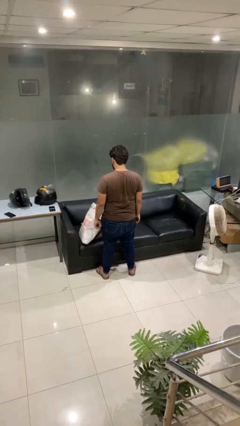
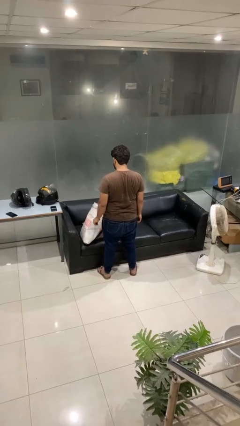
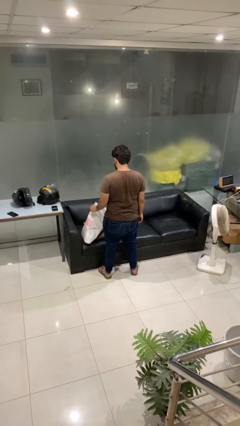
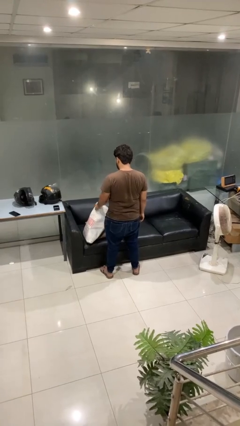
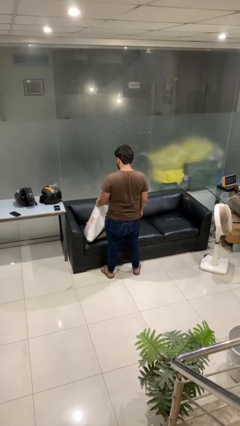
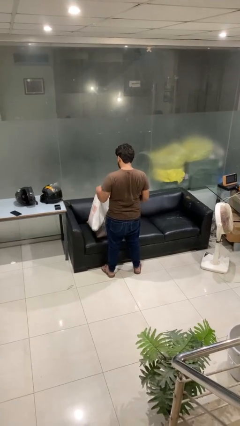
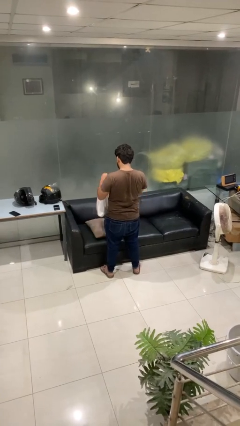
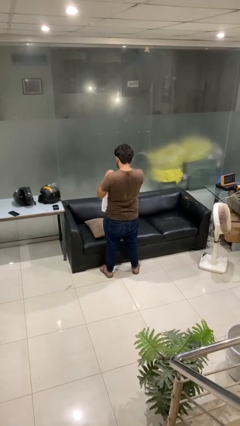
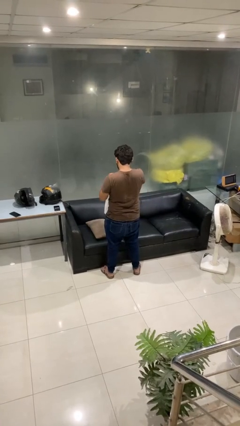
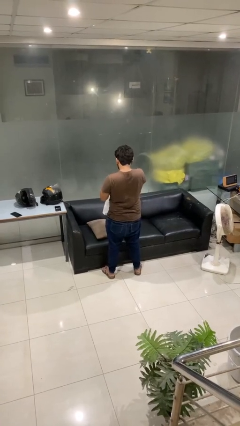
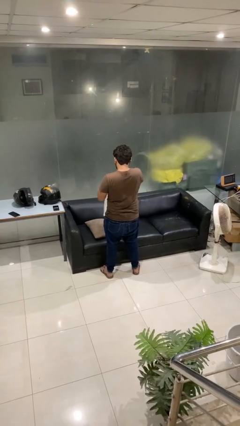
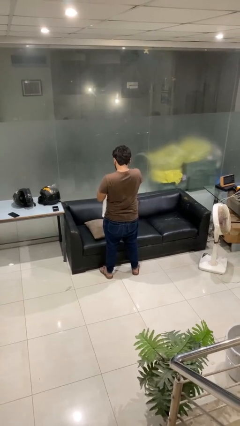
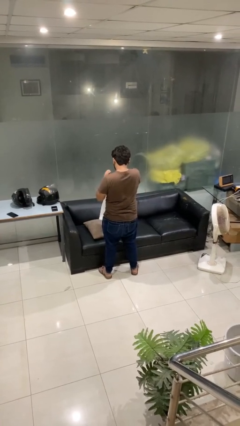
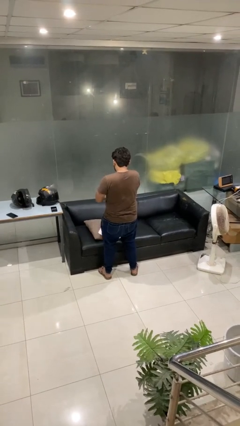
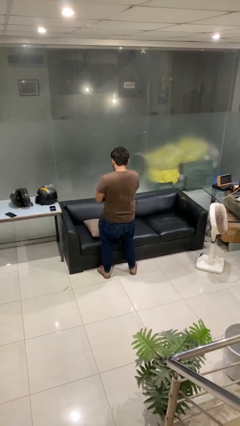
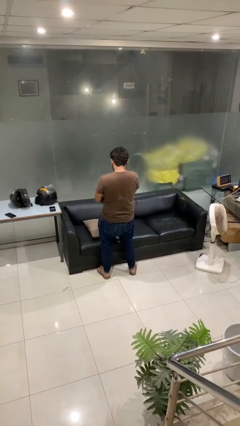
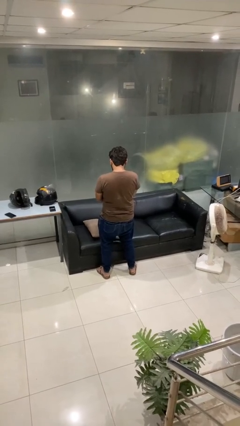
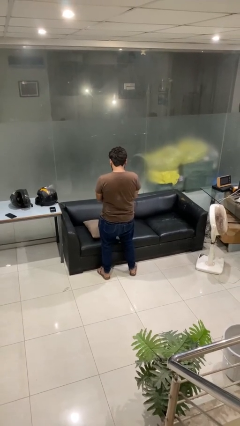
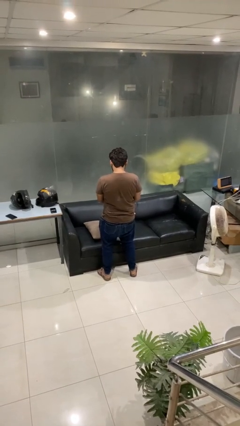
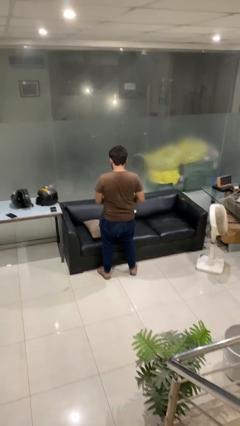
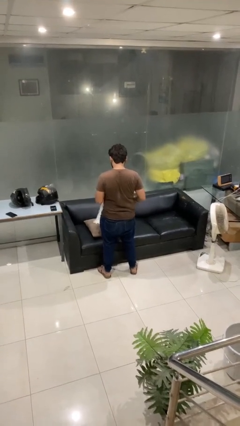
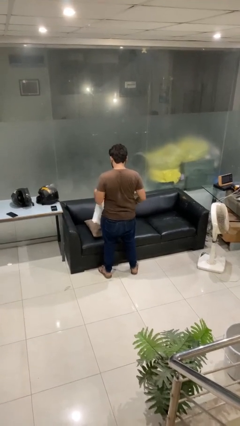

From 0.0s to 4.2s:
person searches in bag

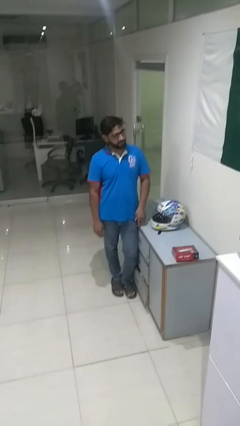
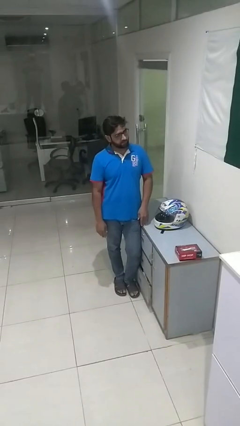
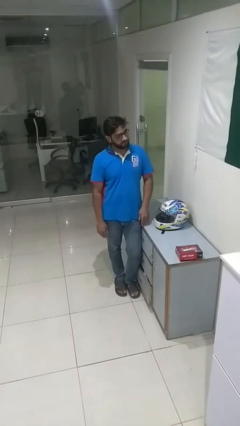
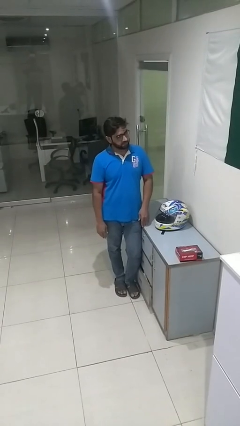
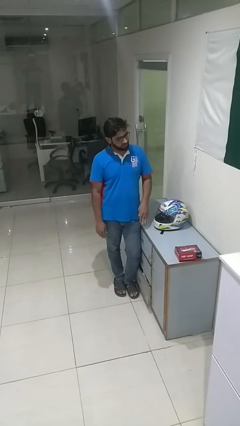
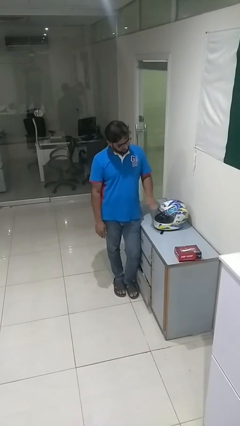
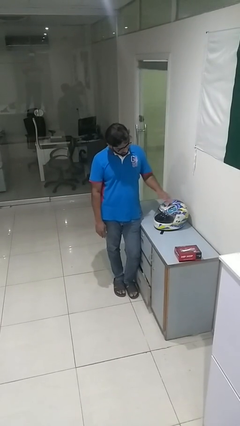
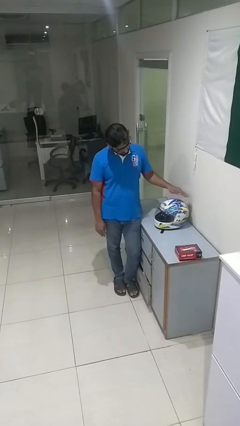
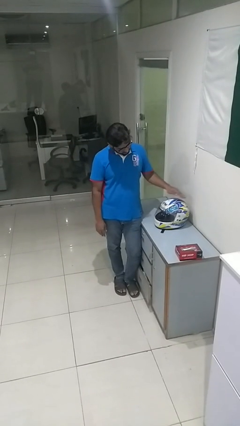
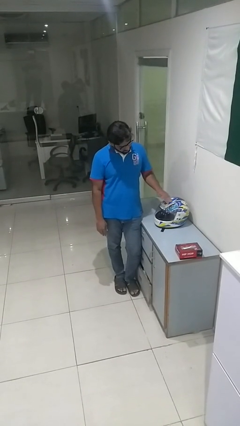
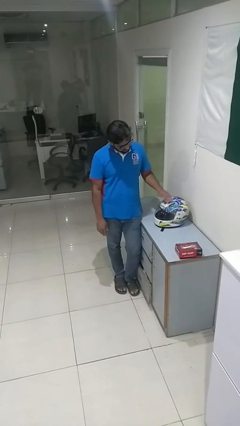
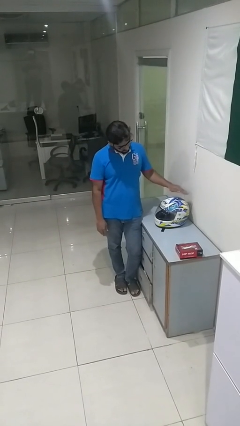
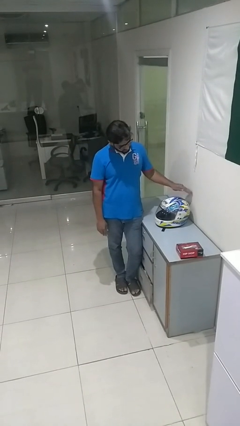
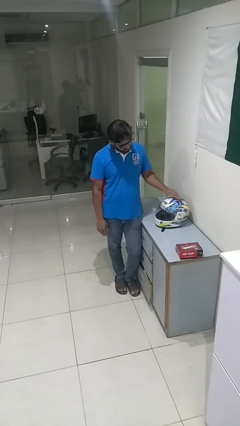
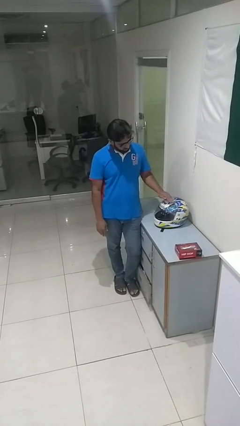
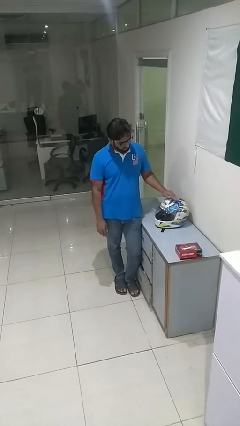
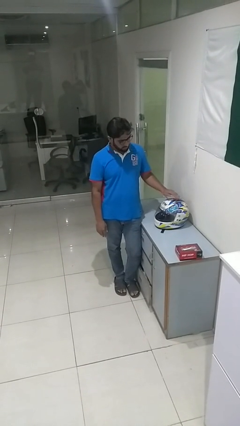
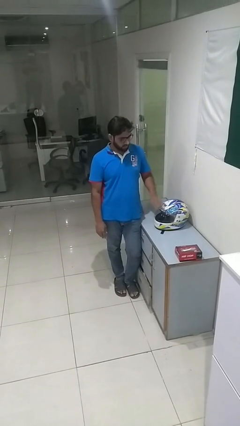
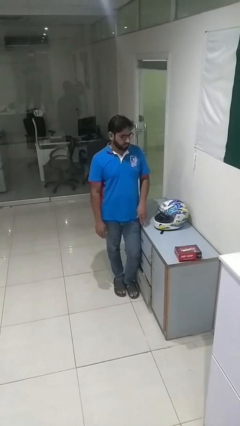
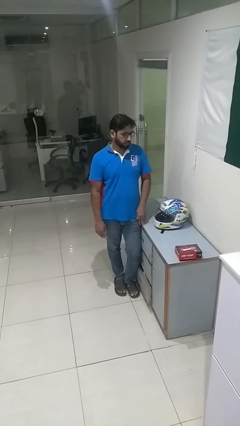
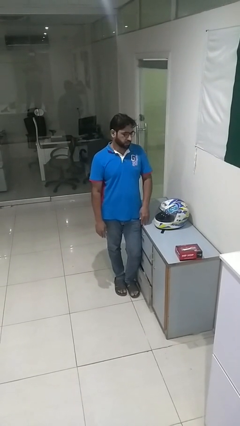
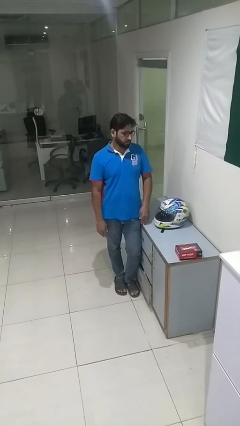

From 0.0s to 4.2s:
person waves hand over object

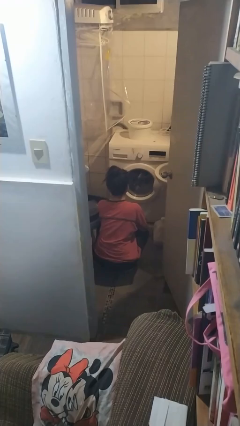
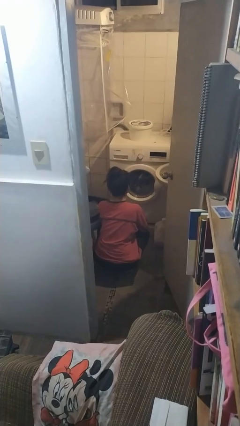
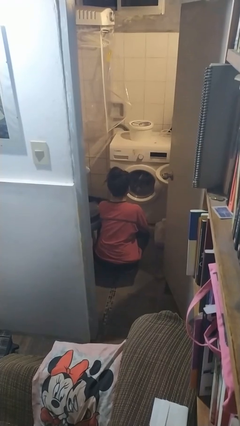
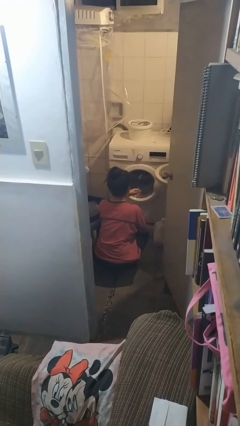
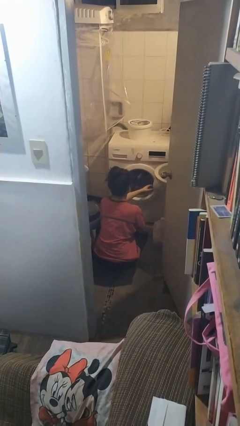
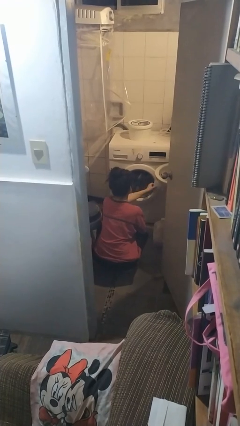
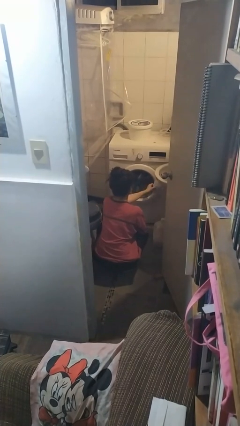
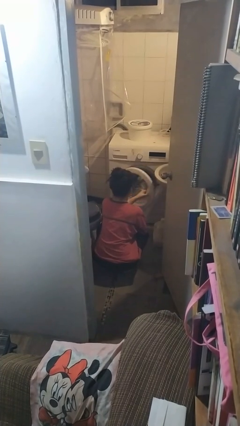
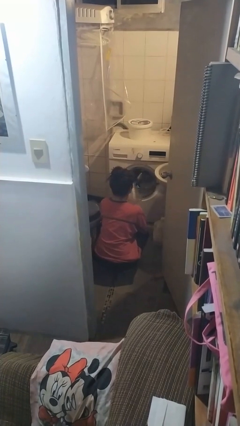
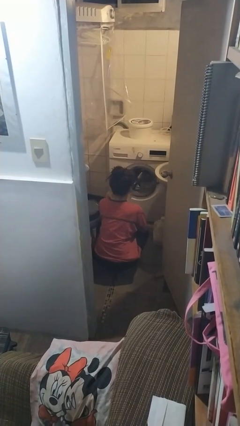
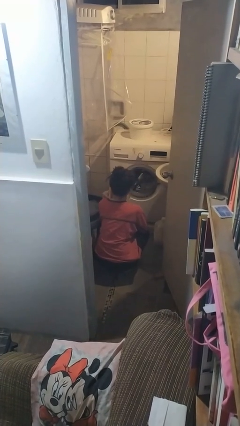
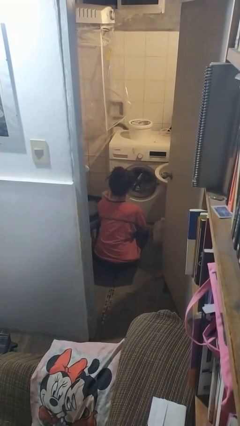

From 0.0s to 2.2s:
person opens clothes washer

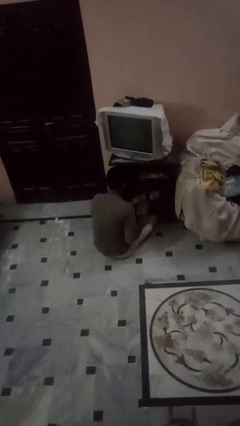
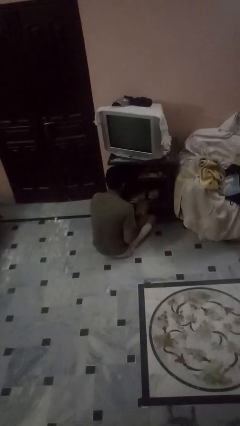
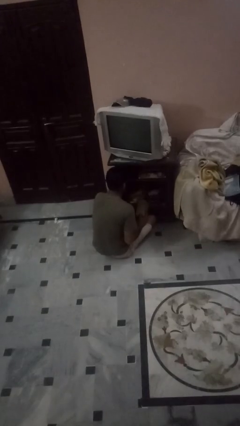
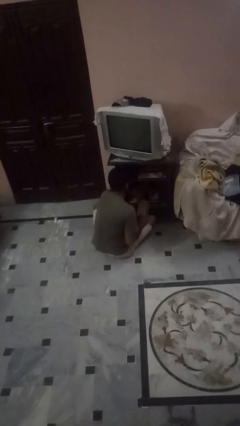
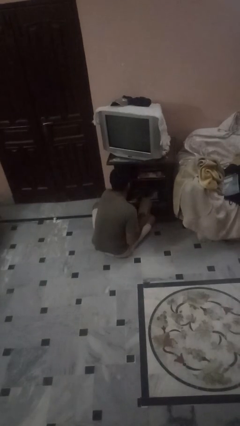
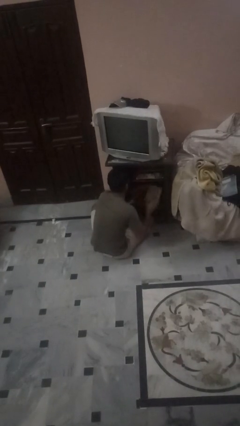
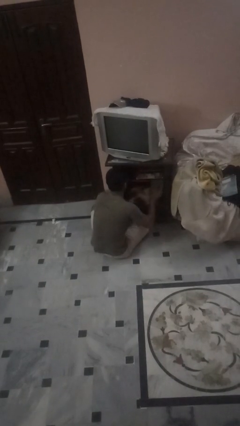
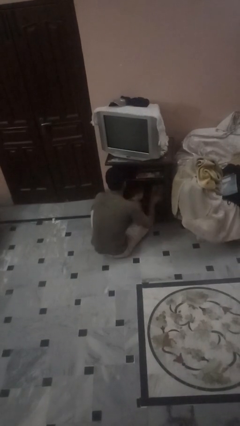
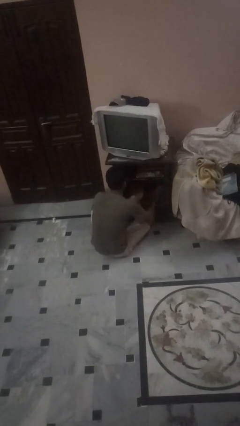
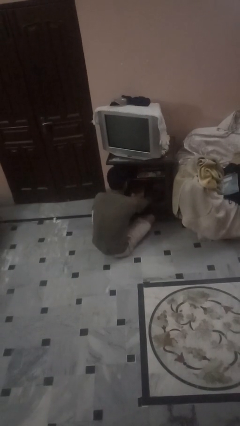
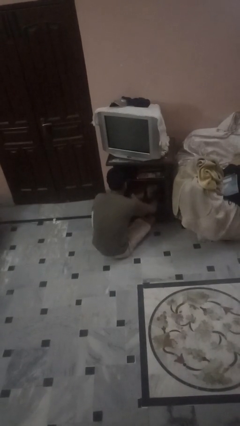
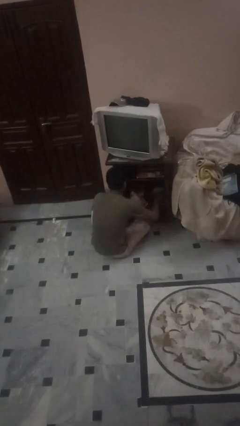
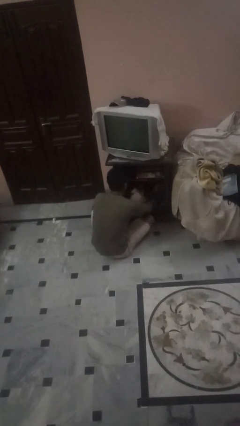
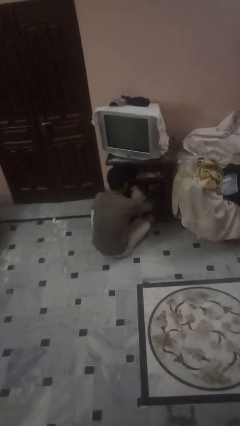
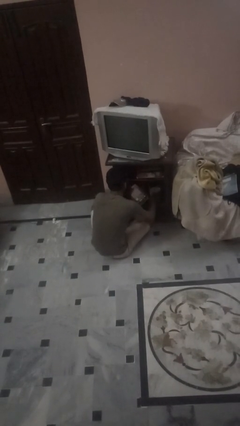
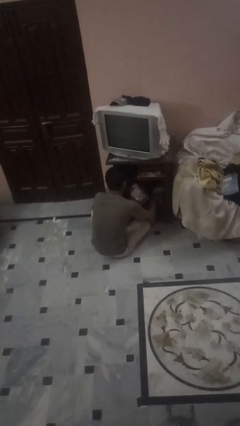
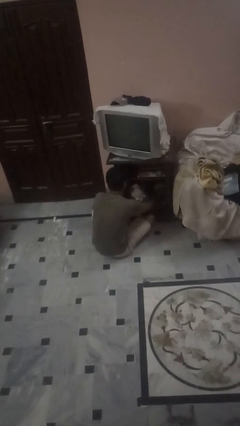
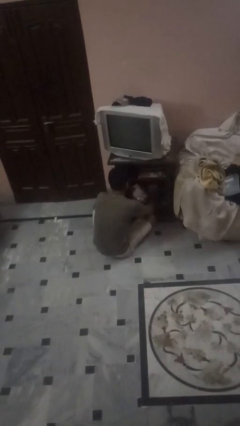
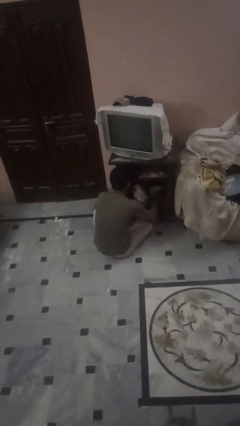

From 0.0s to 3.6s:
person dusts furniture

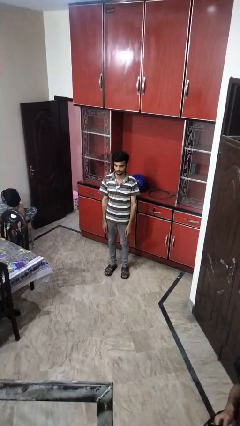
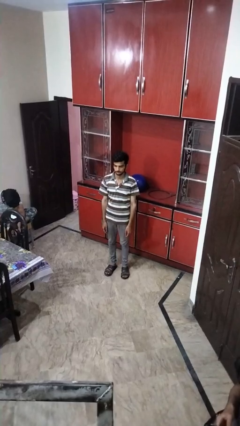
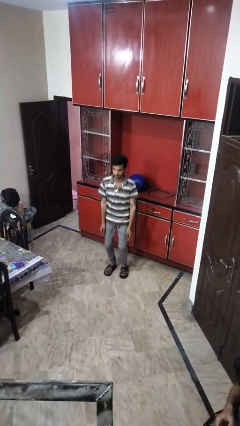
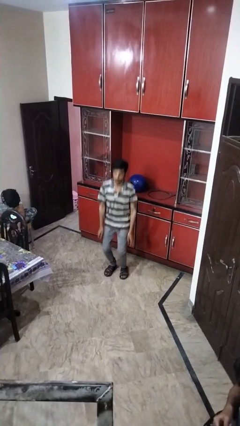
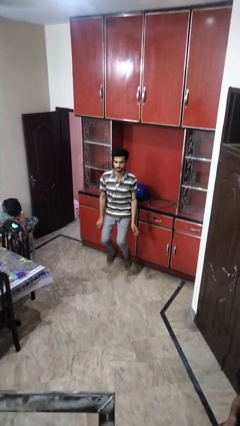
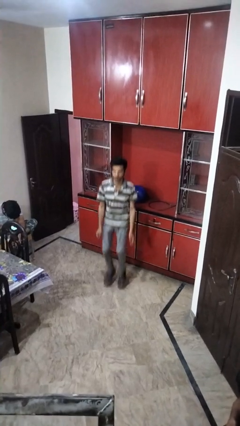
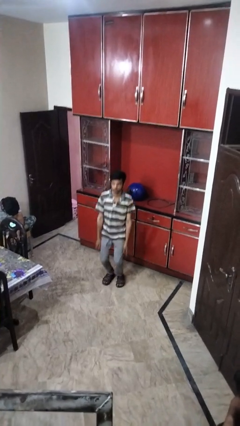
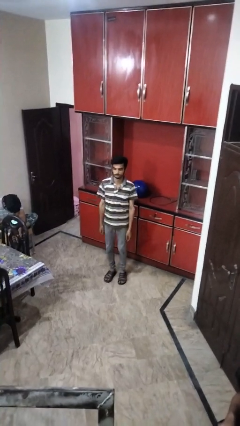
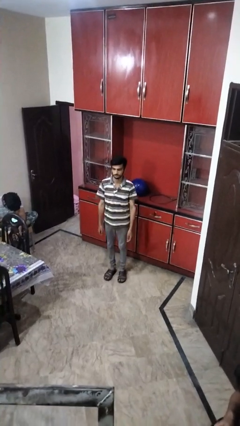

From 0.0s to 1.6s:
person jumps

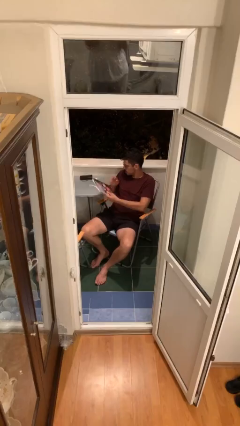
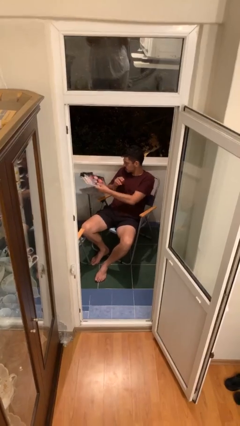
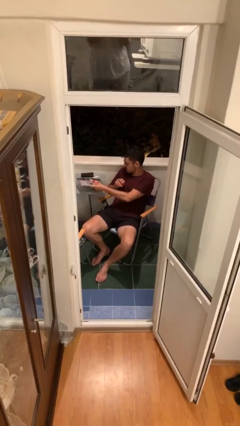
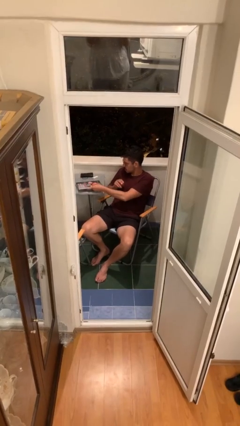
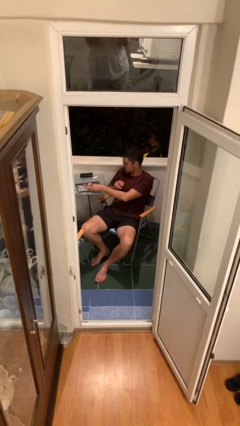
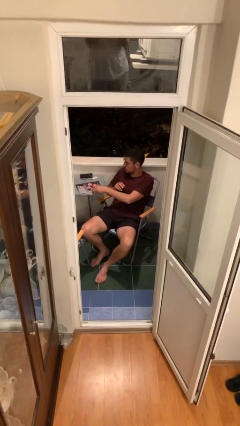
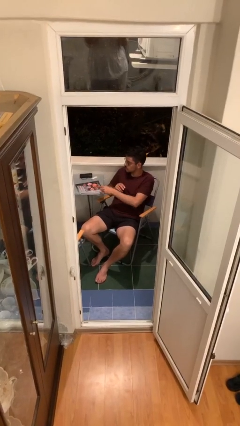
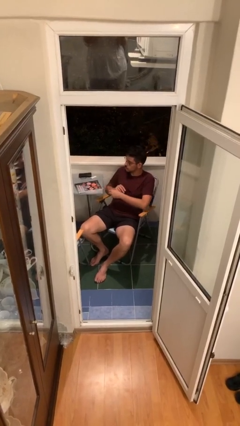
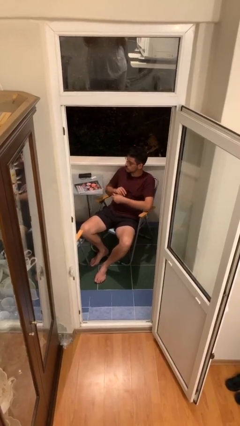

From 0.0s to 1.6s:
person puts down object on table

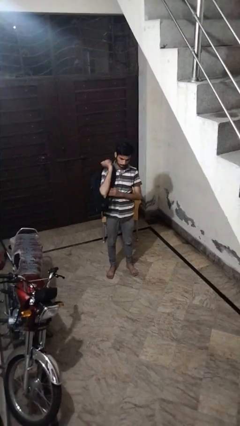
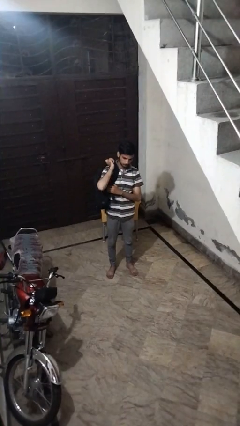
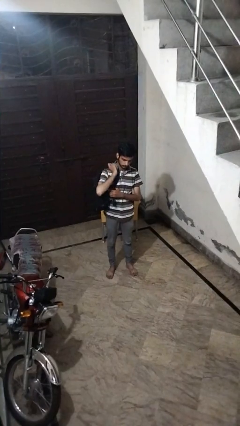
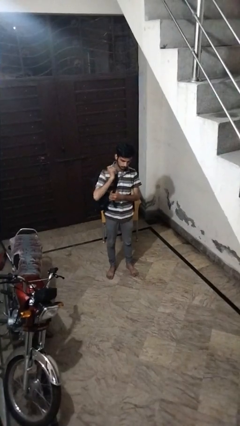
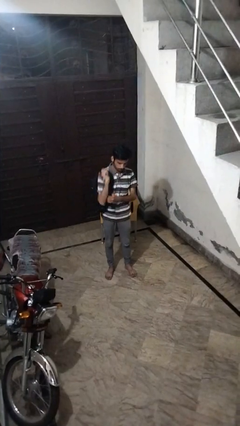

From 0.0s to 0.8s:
person drops object
